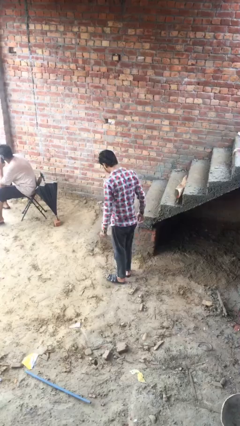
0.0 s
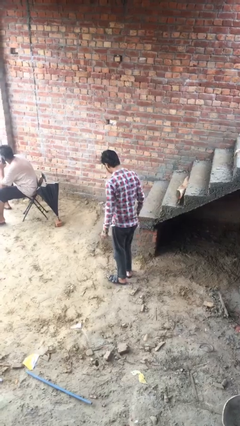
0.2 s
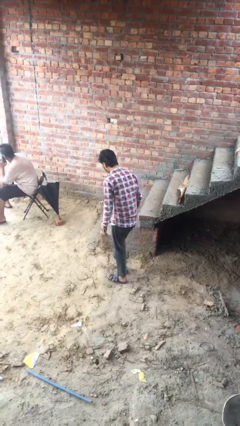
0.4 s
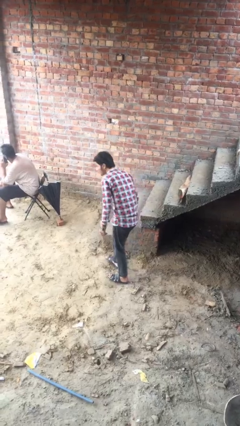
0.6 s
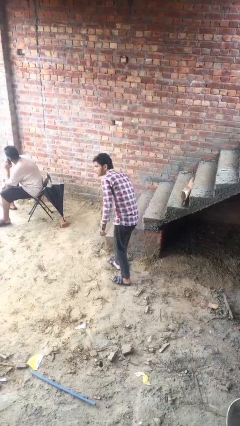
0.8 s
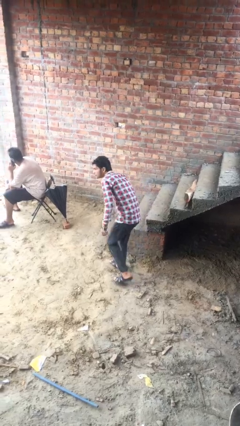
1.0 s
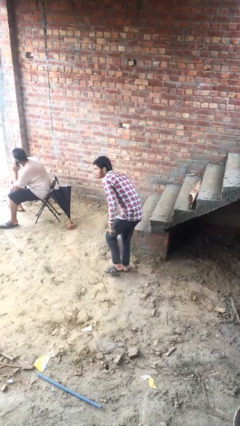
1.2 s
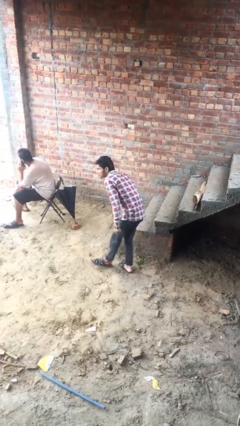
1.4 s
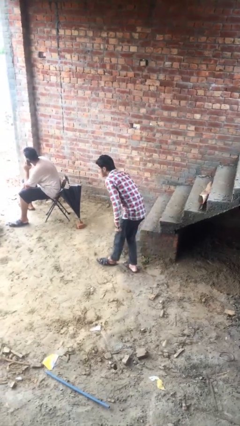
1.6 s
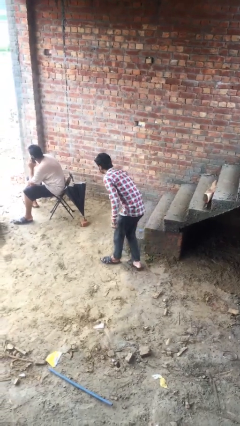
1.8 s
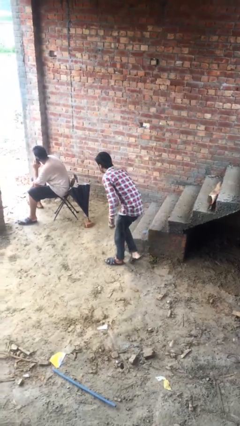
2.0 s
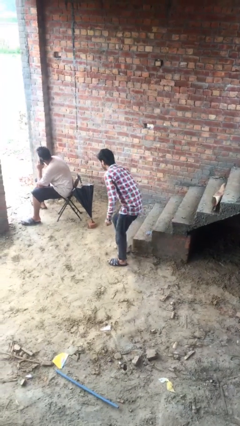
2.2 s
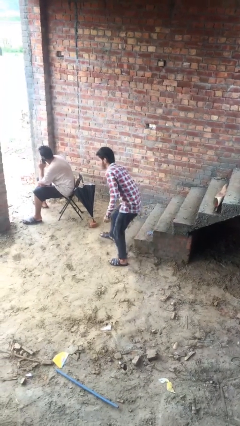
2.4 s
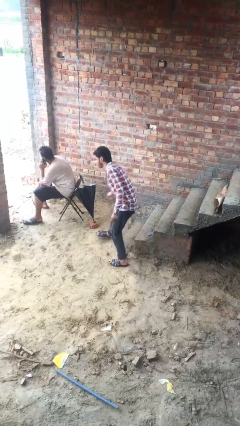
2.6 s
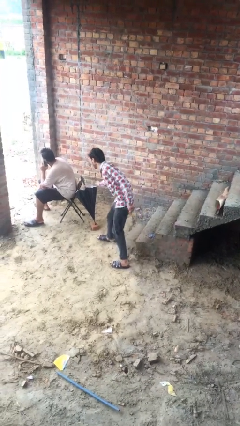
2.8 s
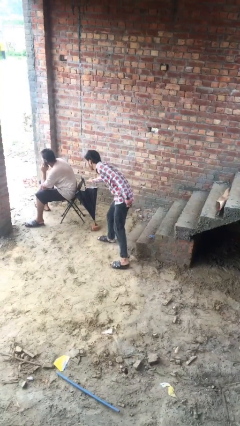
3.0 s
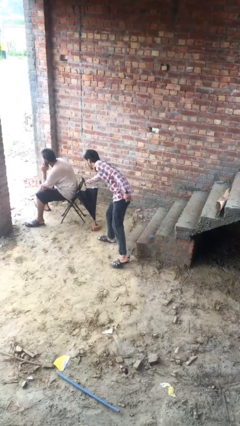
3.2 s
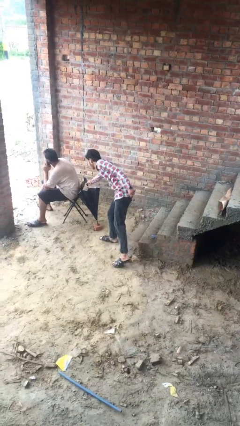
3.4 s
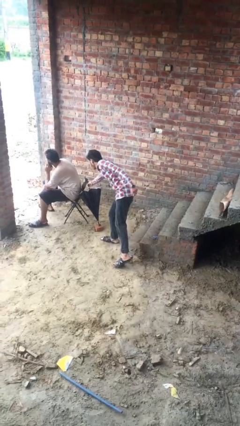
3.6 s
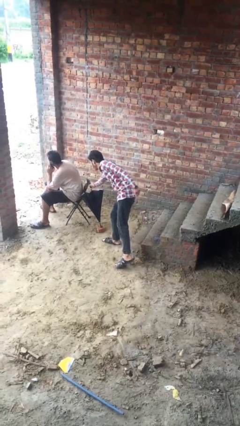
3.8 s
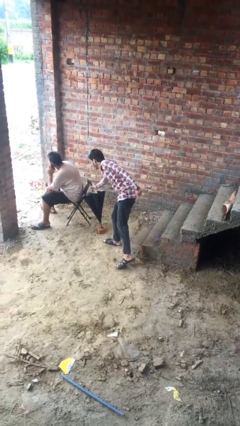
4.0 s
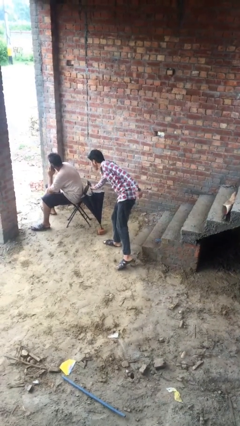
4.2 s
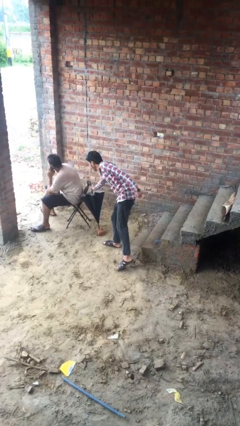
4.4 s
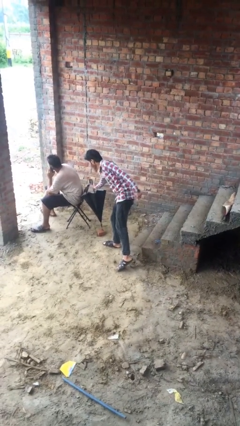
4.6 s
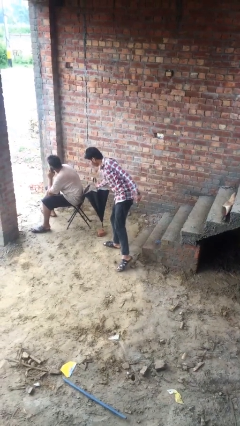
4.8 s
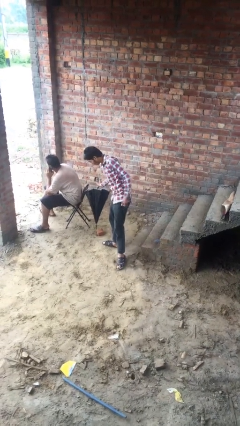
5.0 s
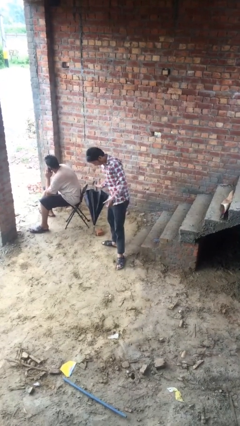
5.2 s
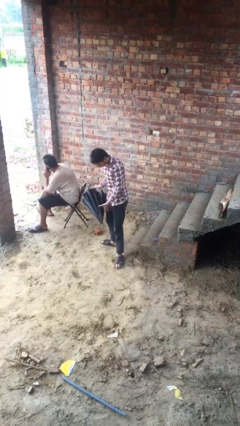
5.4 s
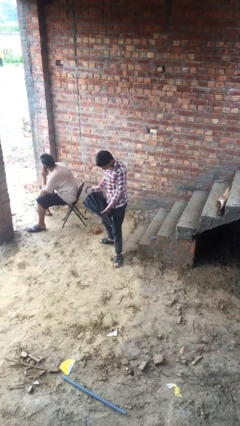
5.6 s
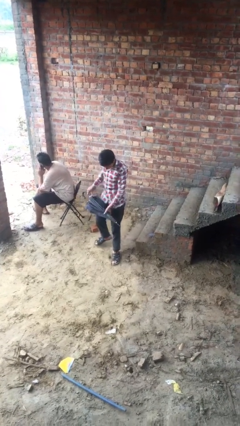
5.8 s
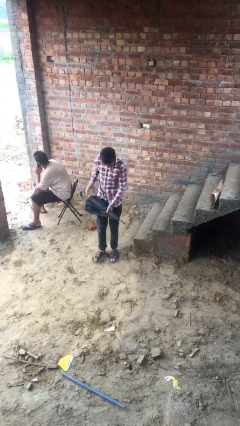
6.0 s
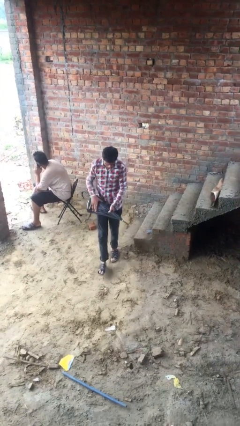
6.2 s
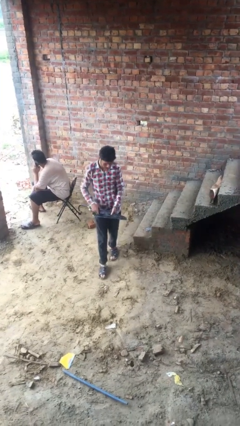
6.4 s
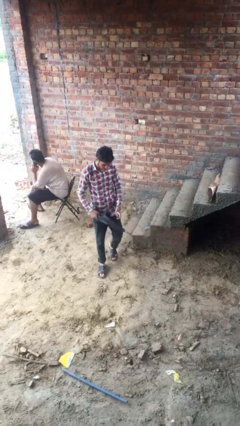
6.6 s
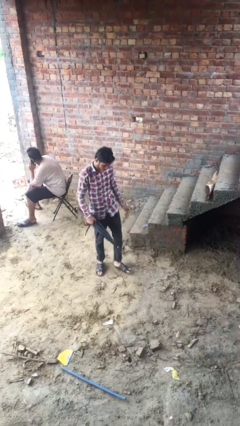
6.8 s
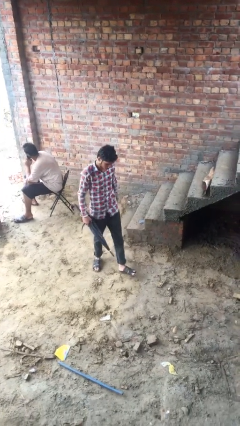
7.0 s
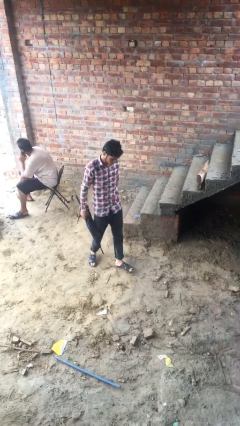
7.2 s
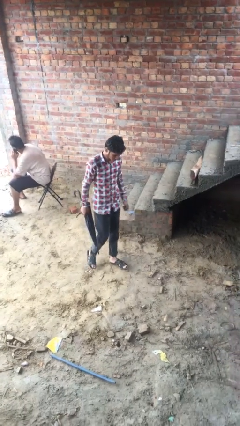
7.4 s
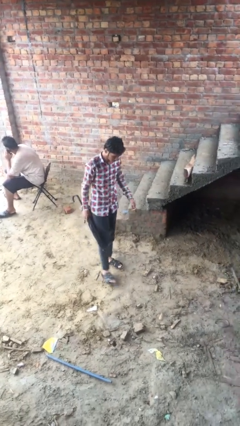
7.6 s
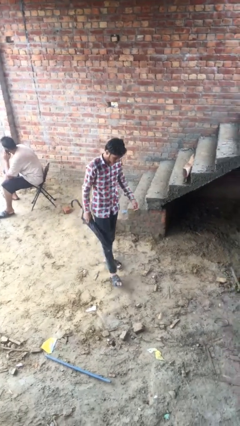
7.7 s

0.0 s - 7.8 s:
person steals object from person

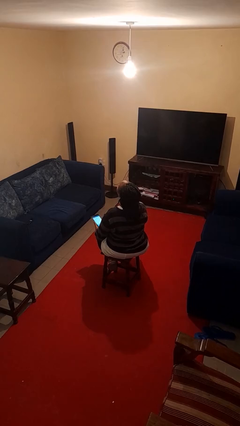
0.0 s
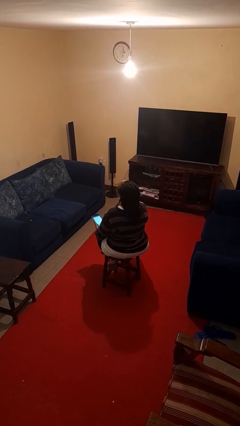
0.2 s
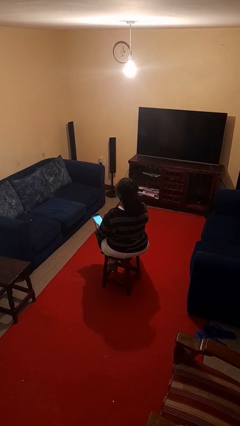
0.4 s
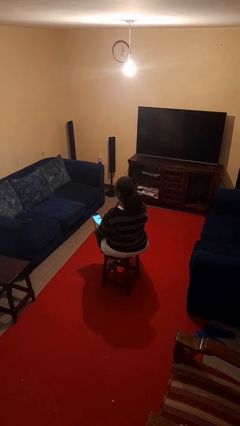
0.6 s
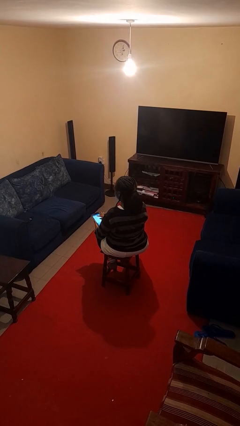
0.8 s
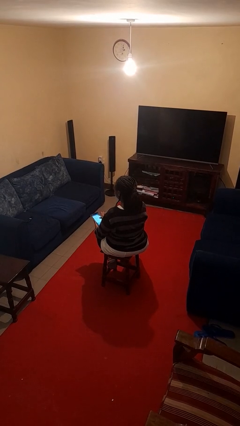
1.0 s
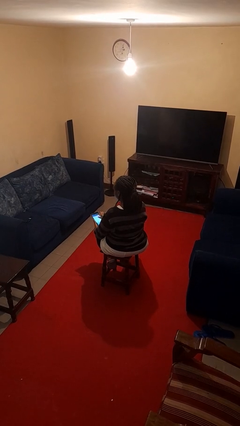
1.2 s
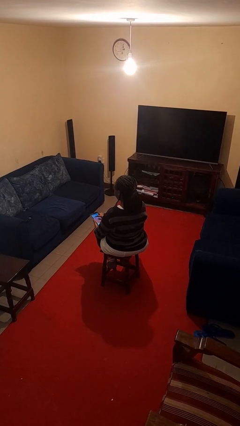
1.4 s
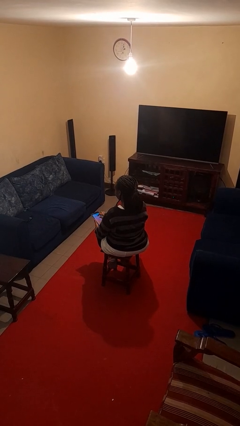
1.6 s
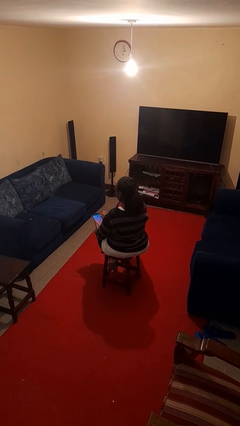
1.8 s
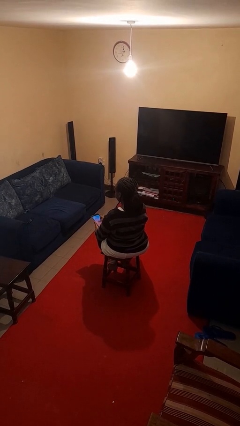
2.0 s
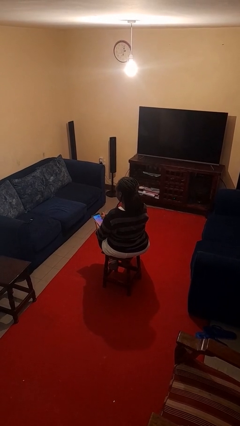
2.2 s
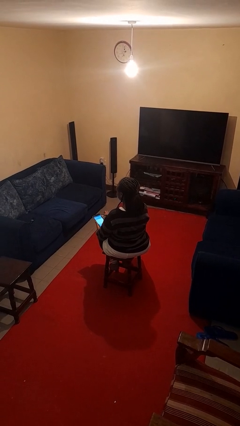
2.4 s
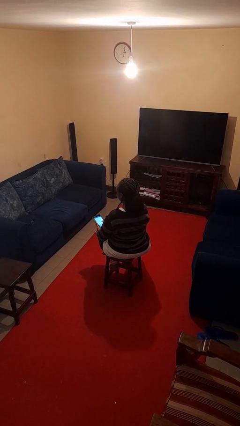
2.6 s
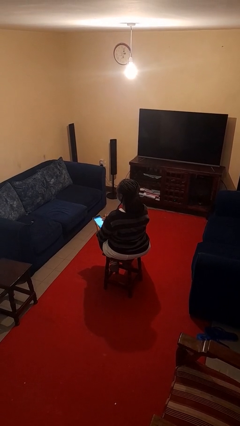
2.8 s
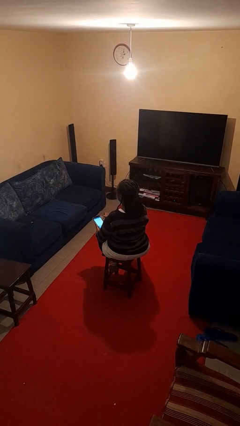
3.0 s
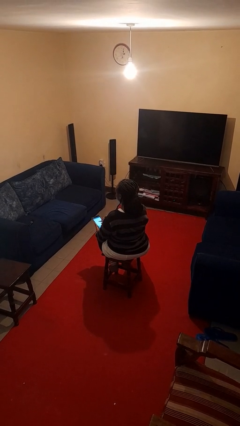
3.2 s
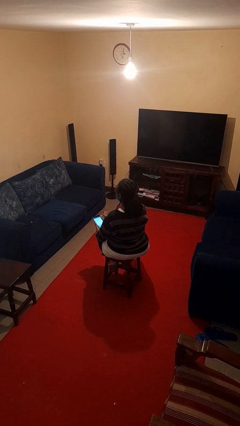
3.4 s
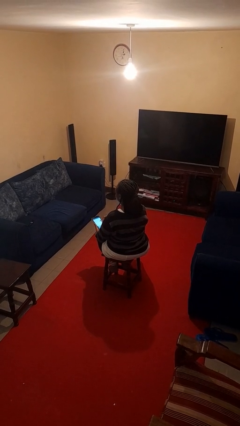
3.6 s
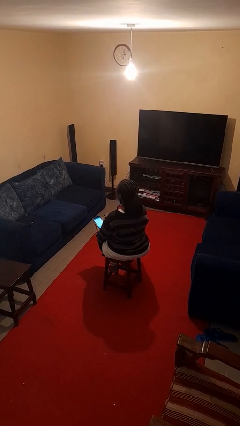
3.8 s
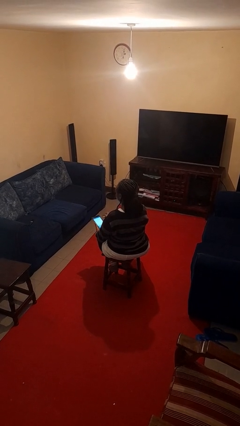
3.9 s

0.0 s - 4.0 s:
person interacts with tablet

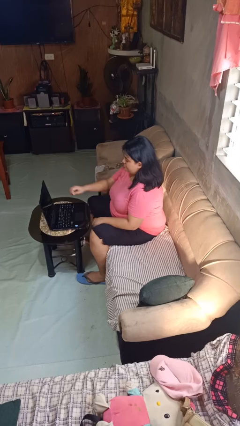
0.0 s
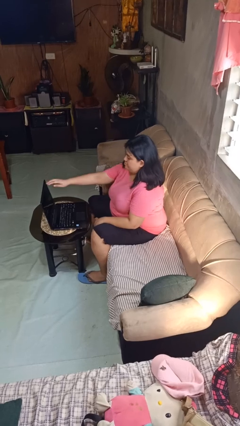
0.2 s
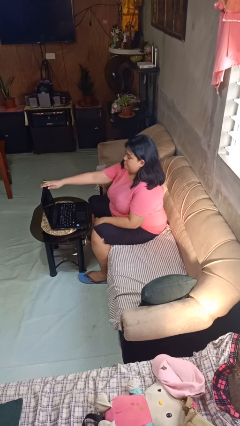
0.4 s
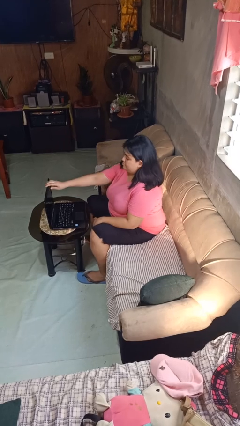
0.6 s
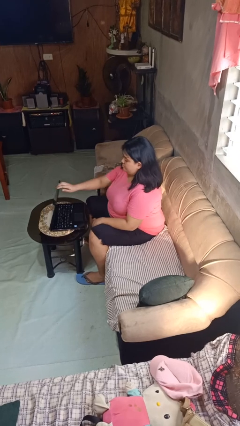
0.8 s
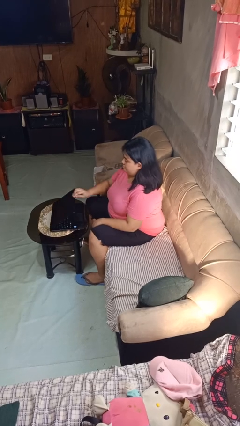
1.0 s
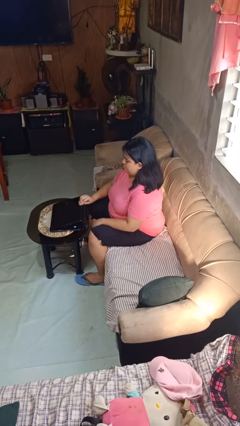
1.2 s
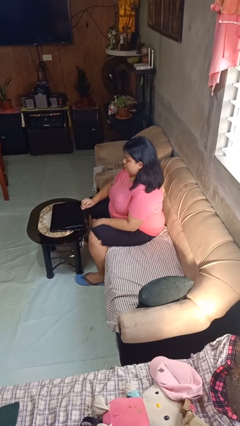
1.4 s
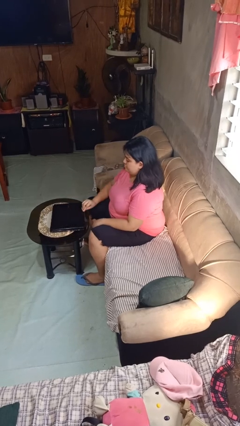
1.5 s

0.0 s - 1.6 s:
person closes laptop

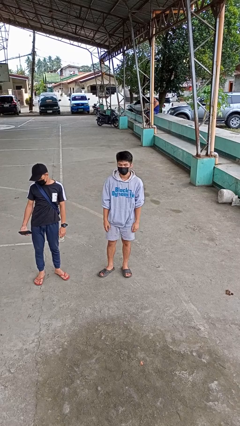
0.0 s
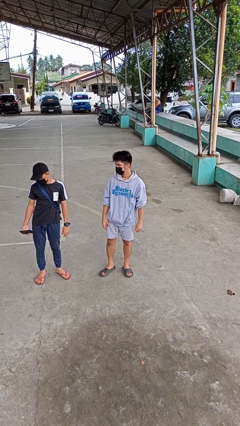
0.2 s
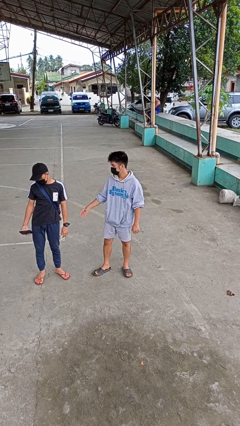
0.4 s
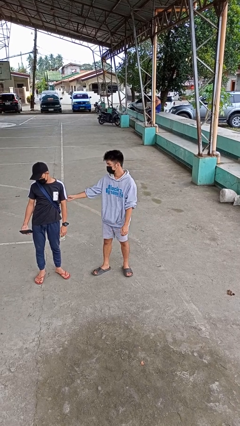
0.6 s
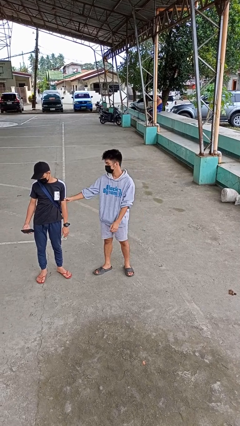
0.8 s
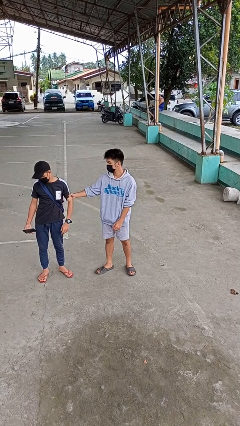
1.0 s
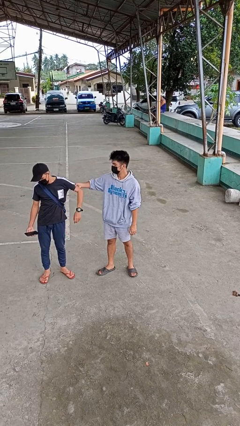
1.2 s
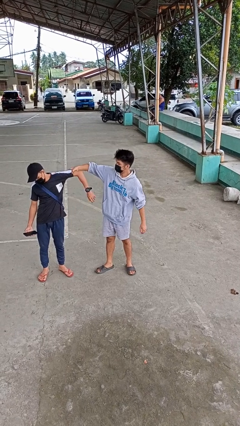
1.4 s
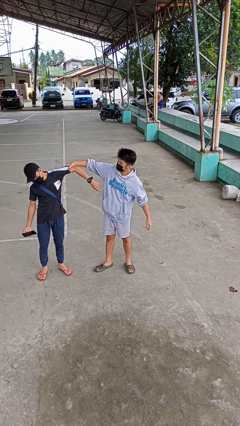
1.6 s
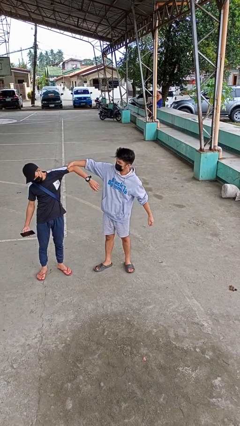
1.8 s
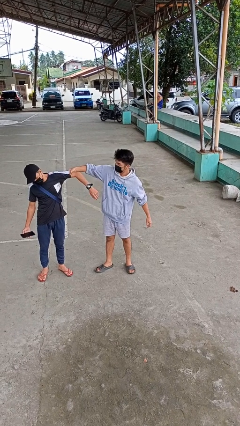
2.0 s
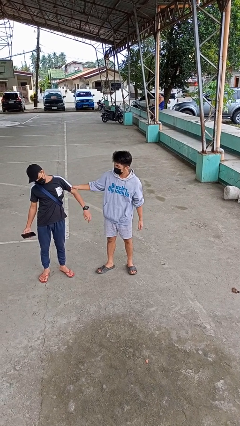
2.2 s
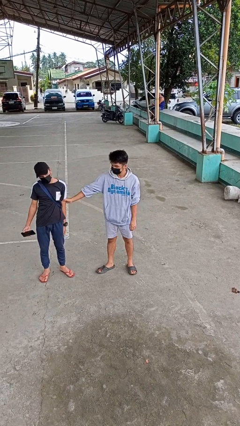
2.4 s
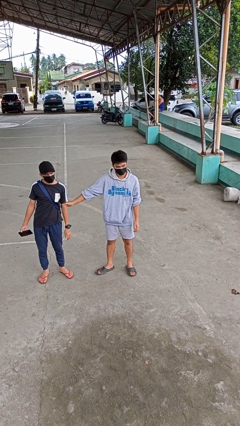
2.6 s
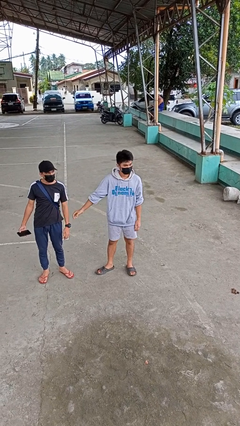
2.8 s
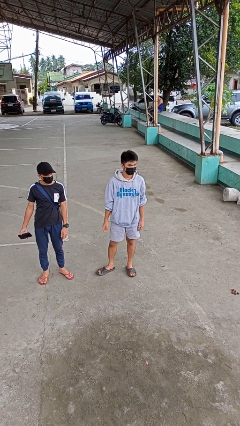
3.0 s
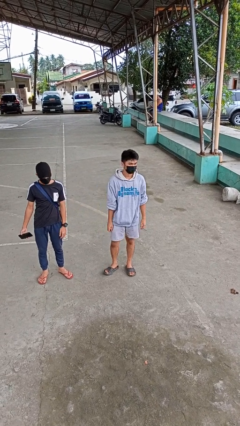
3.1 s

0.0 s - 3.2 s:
person grabs person by bicep

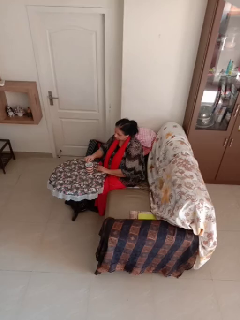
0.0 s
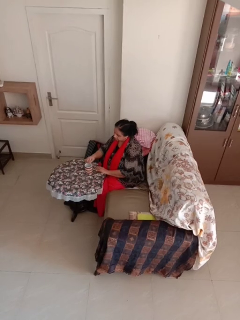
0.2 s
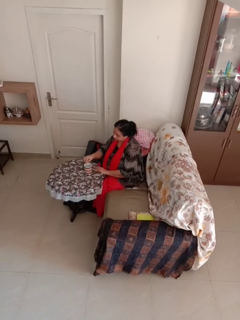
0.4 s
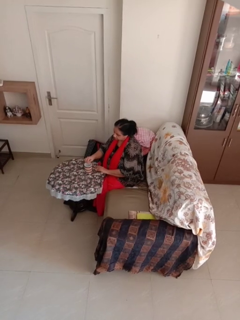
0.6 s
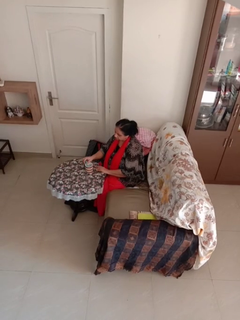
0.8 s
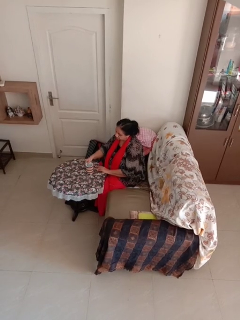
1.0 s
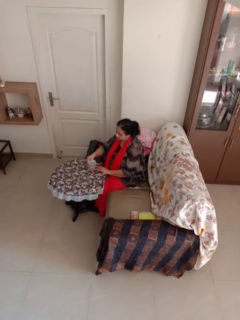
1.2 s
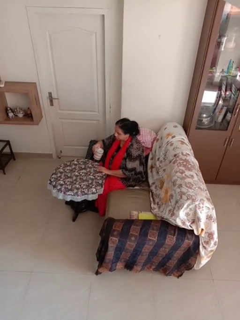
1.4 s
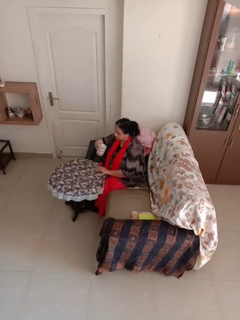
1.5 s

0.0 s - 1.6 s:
person stirs mug
